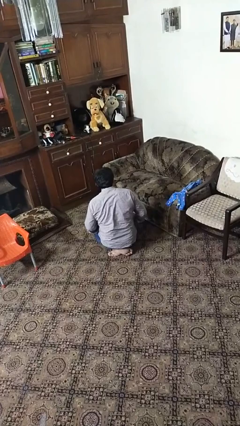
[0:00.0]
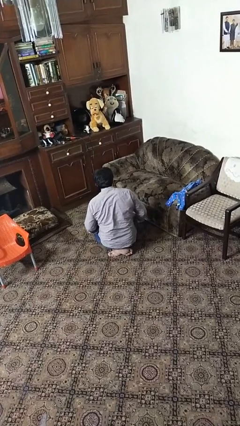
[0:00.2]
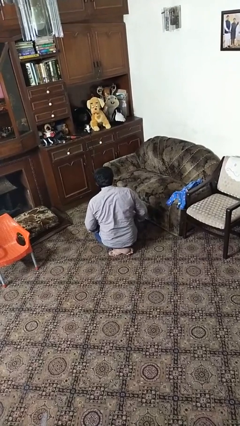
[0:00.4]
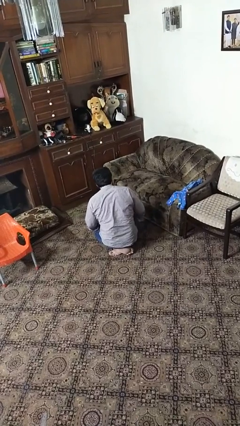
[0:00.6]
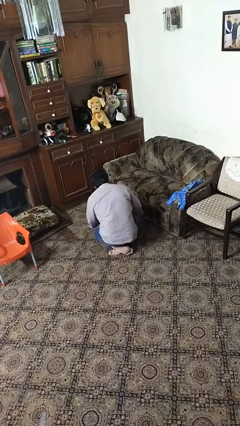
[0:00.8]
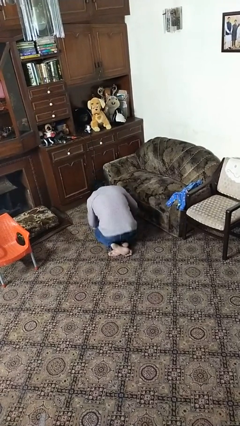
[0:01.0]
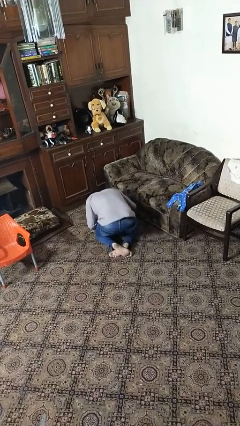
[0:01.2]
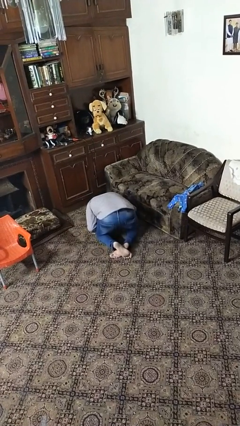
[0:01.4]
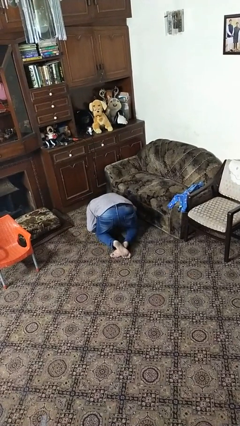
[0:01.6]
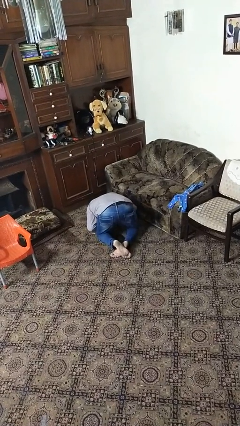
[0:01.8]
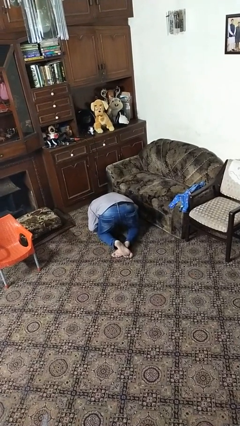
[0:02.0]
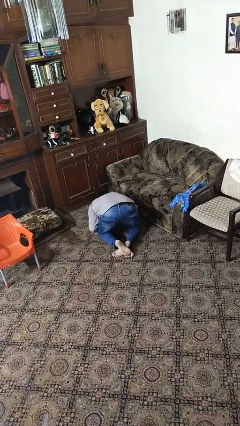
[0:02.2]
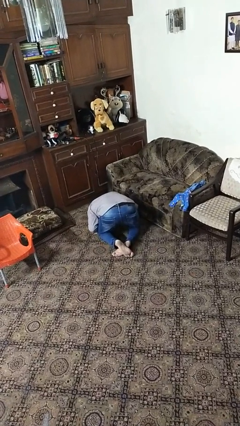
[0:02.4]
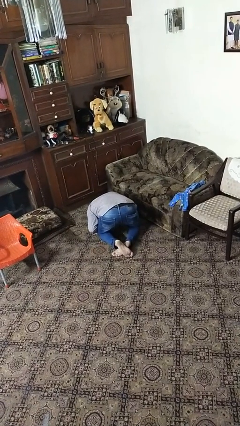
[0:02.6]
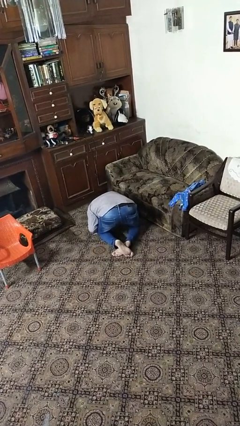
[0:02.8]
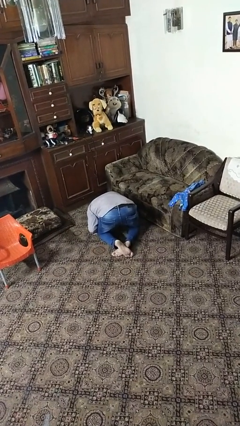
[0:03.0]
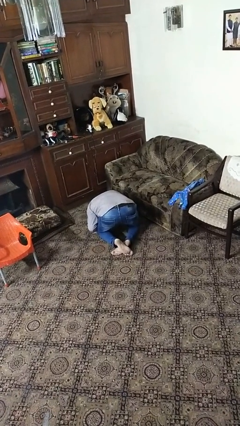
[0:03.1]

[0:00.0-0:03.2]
person searches under couch

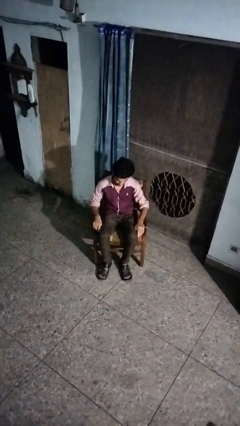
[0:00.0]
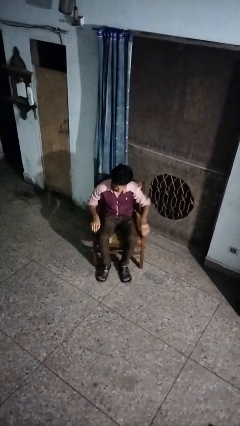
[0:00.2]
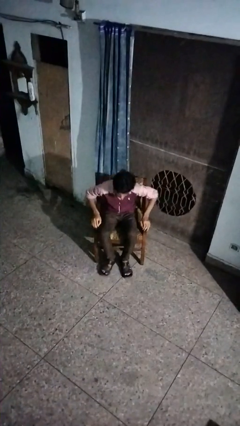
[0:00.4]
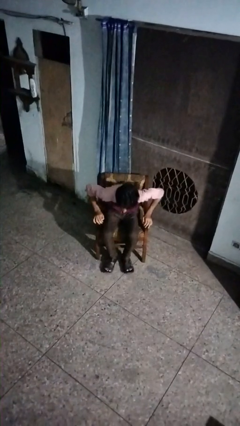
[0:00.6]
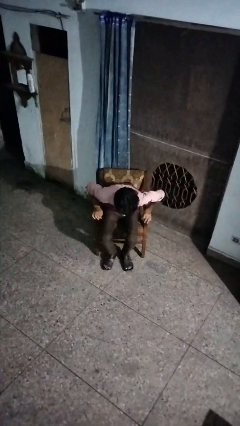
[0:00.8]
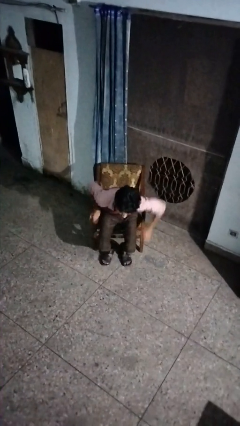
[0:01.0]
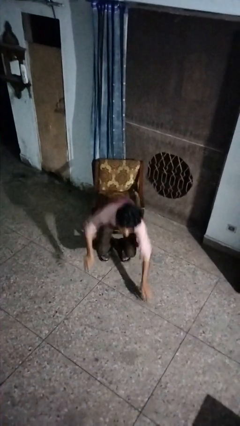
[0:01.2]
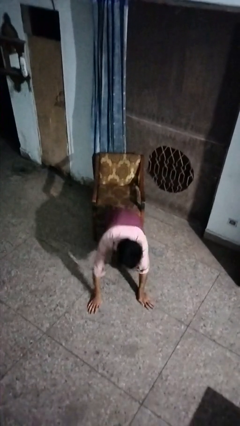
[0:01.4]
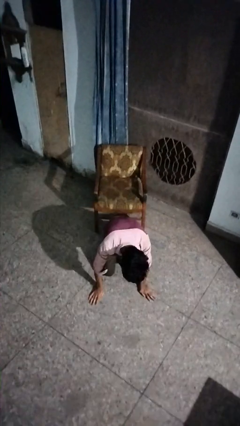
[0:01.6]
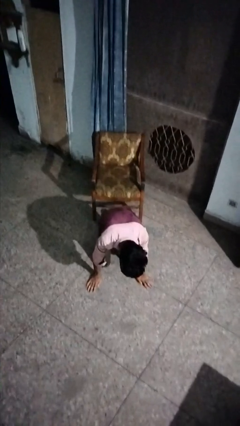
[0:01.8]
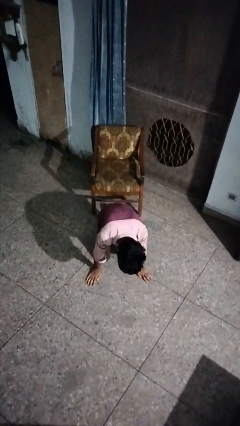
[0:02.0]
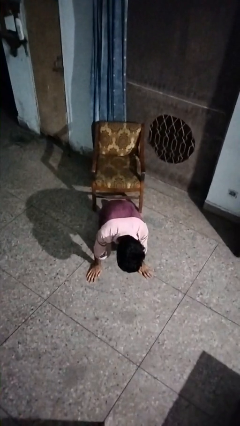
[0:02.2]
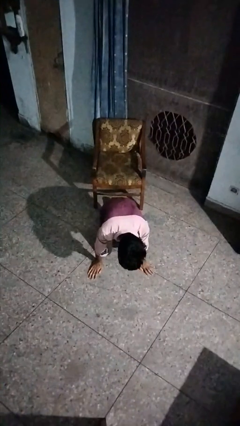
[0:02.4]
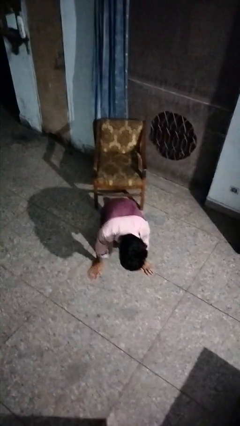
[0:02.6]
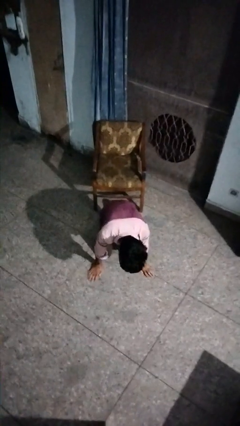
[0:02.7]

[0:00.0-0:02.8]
person falls from chair

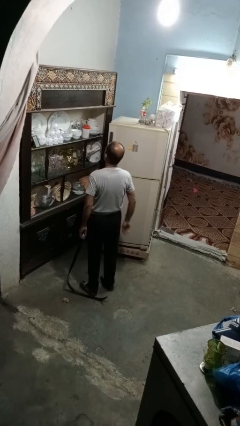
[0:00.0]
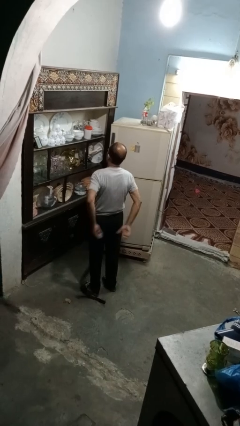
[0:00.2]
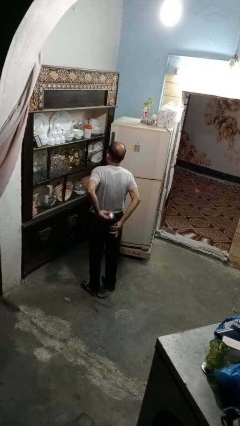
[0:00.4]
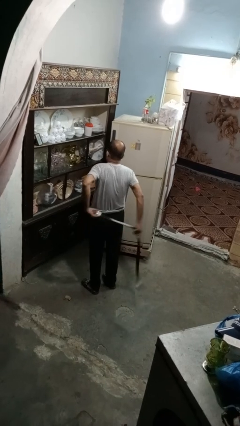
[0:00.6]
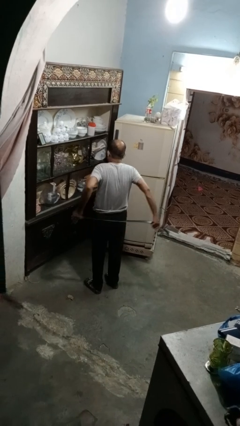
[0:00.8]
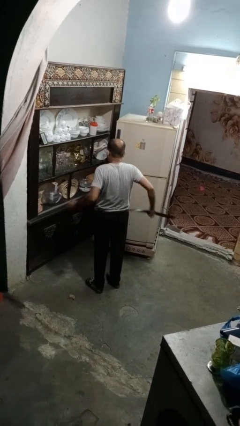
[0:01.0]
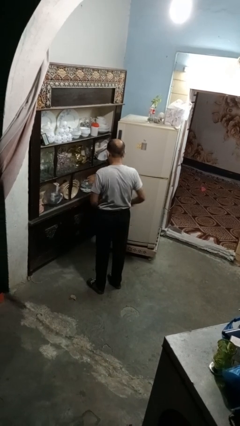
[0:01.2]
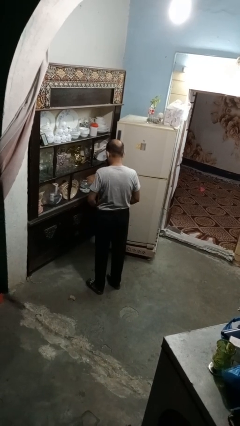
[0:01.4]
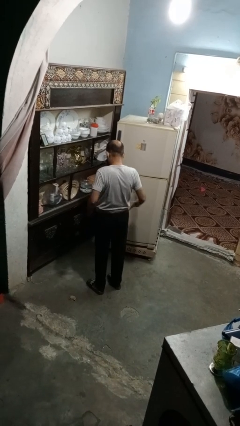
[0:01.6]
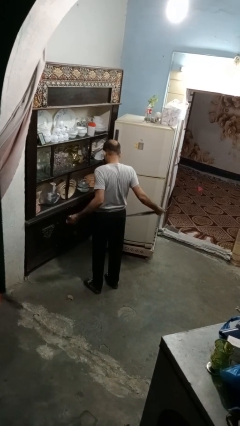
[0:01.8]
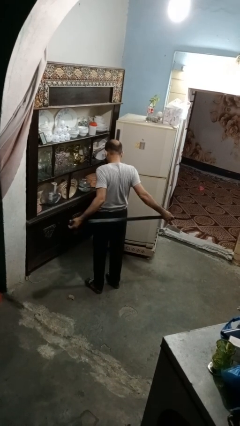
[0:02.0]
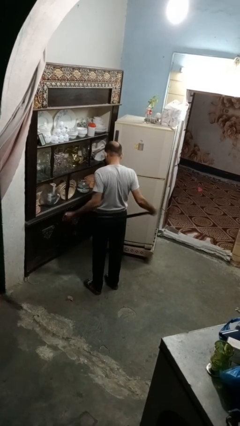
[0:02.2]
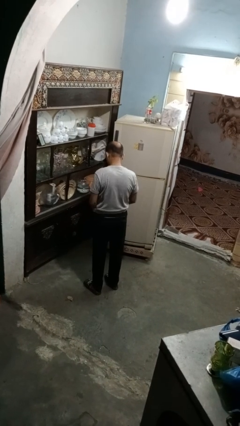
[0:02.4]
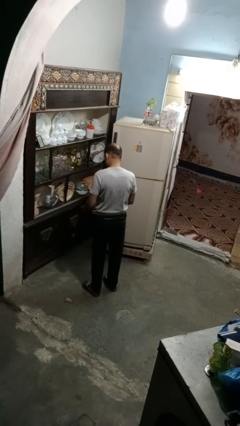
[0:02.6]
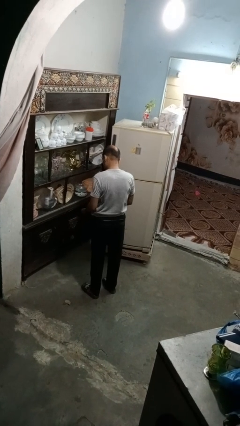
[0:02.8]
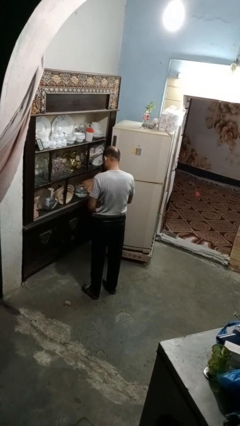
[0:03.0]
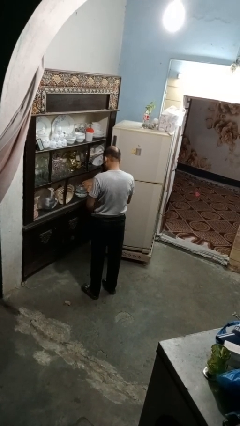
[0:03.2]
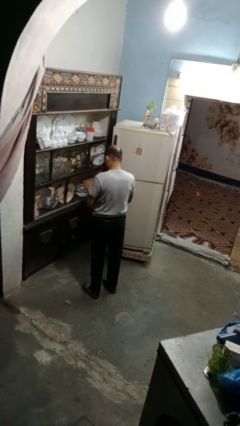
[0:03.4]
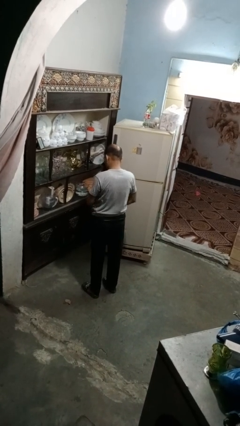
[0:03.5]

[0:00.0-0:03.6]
person puts on belt

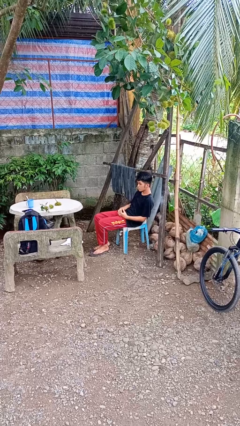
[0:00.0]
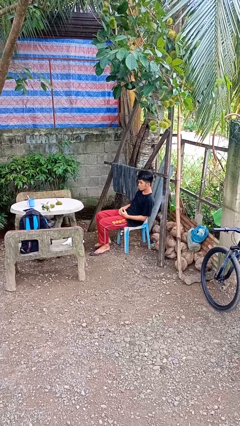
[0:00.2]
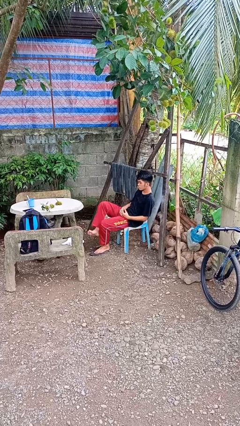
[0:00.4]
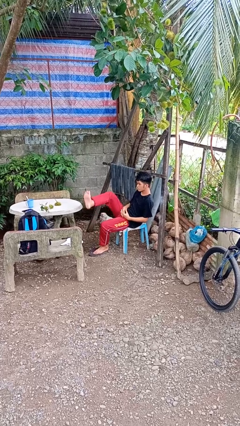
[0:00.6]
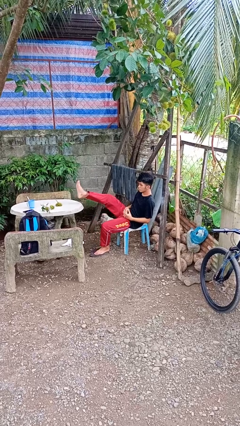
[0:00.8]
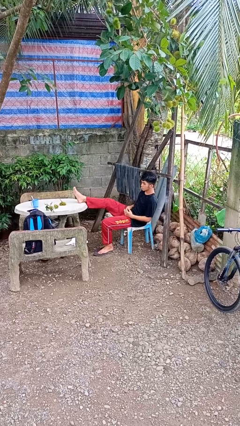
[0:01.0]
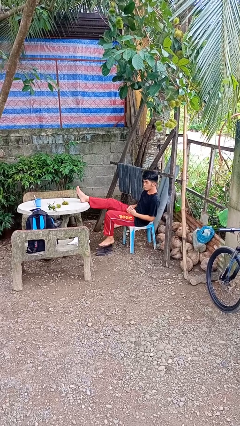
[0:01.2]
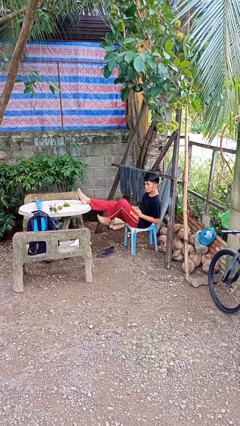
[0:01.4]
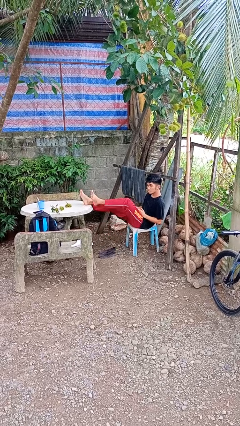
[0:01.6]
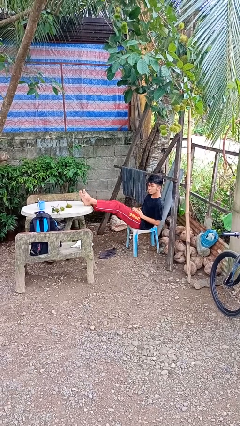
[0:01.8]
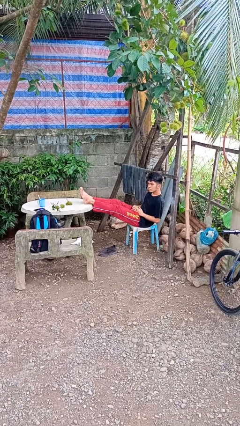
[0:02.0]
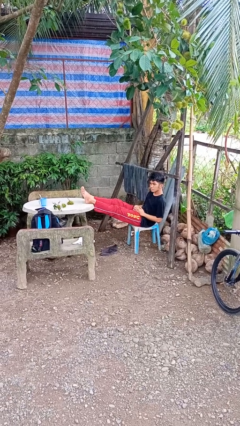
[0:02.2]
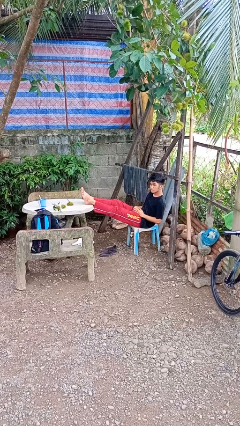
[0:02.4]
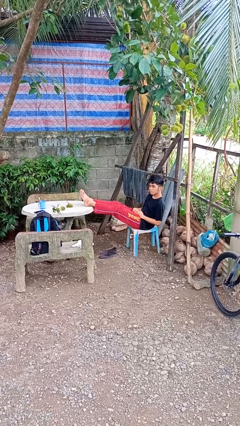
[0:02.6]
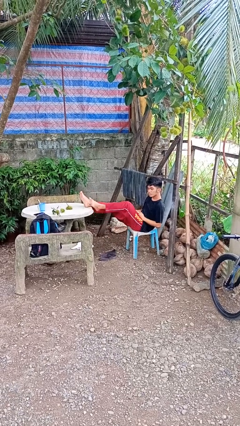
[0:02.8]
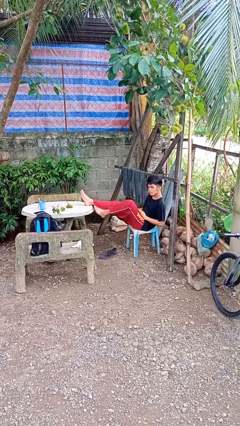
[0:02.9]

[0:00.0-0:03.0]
person puts feet up

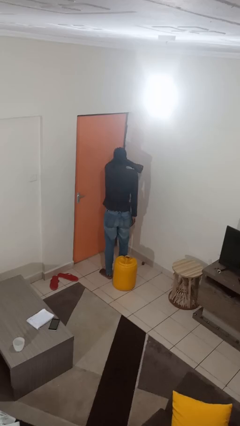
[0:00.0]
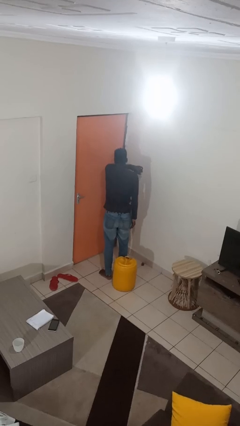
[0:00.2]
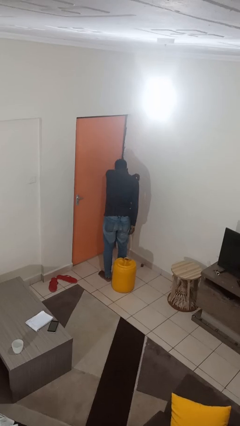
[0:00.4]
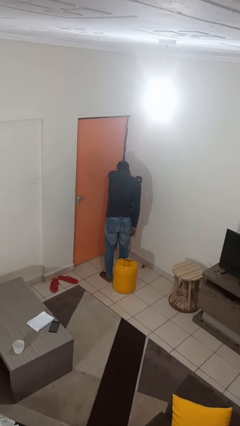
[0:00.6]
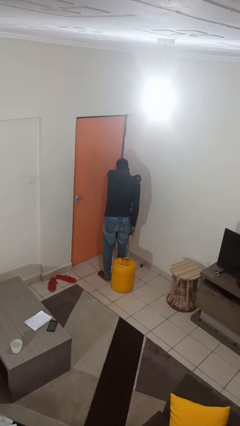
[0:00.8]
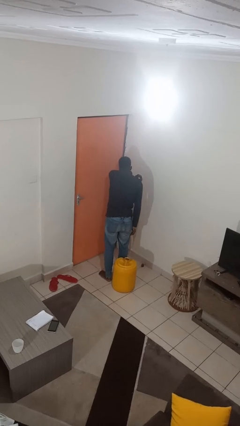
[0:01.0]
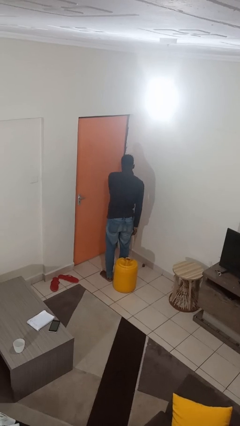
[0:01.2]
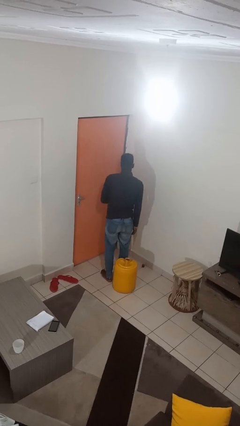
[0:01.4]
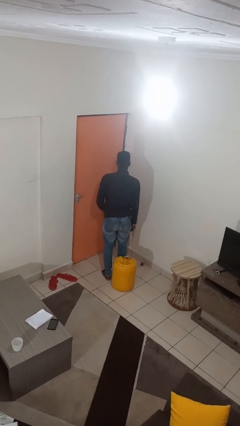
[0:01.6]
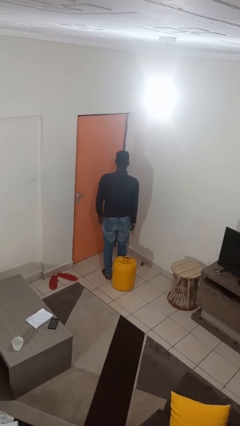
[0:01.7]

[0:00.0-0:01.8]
person sneezes into arm

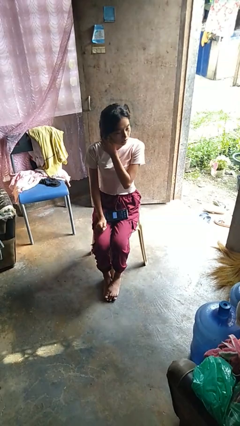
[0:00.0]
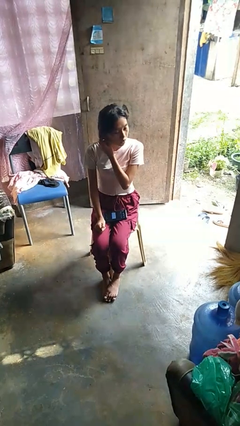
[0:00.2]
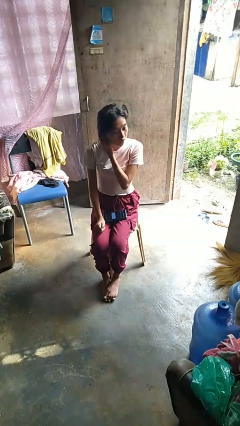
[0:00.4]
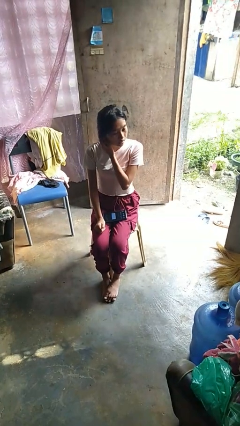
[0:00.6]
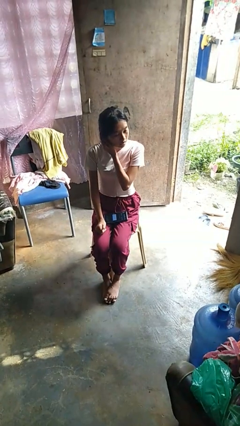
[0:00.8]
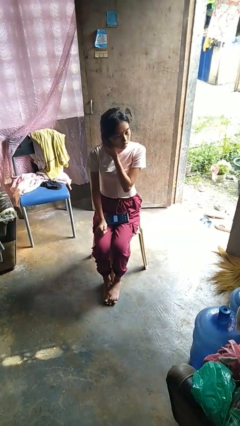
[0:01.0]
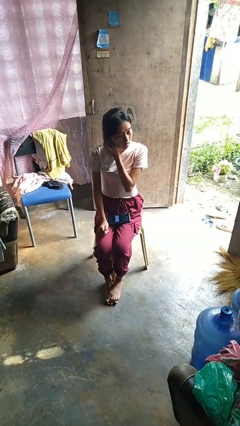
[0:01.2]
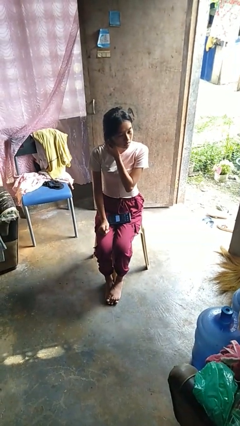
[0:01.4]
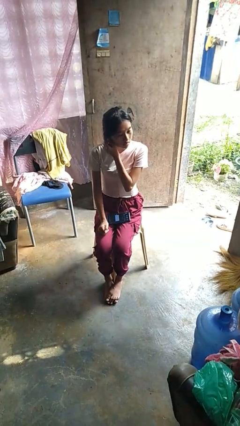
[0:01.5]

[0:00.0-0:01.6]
person touches earlobe

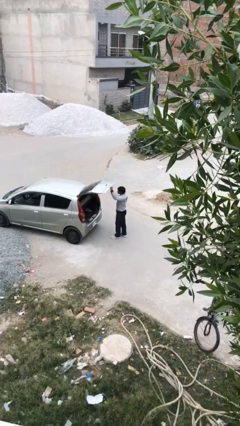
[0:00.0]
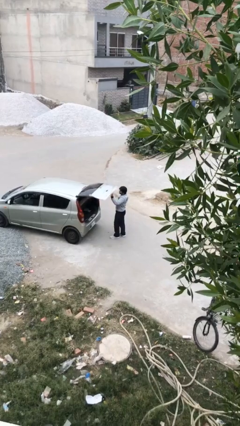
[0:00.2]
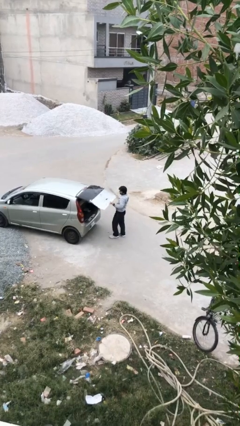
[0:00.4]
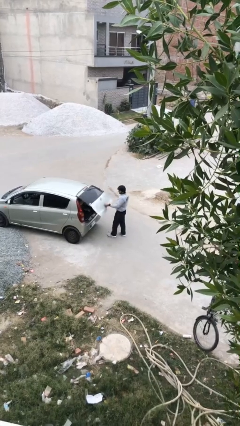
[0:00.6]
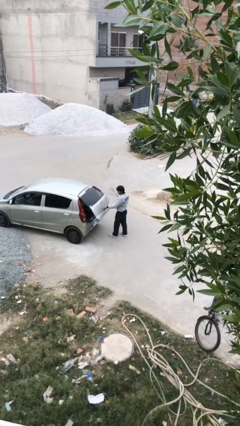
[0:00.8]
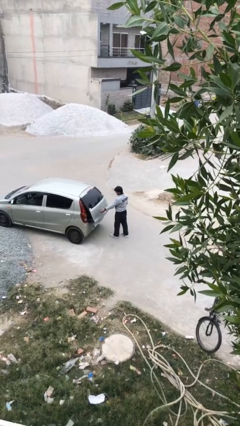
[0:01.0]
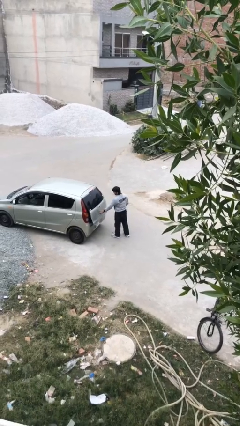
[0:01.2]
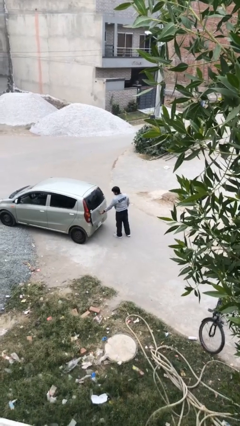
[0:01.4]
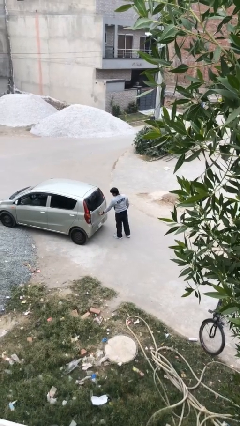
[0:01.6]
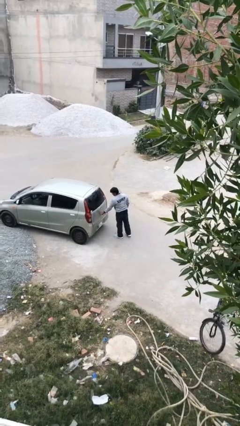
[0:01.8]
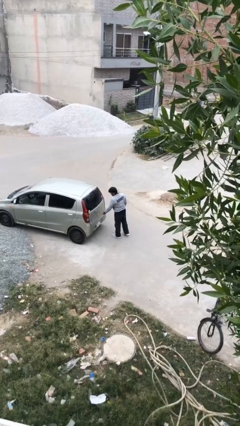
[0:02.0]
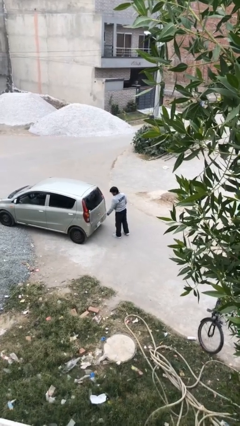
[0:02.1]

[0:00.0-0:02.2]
person closes car trunk
